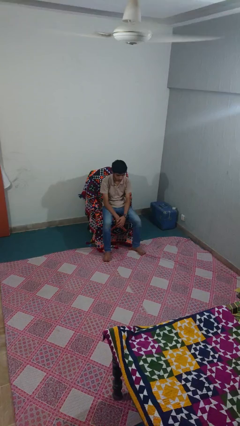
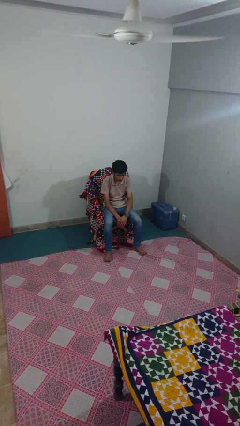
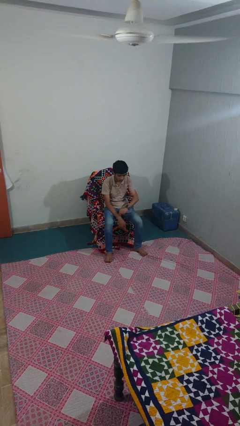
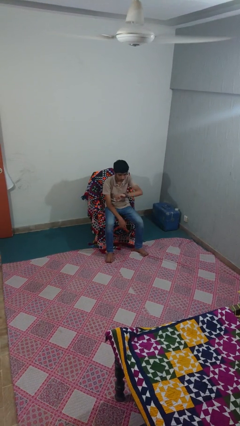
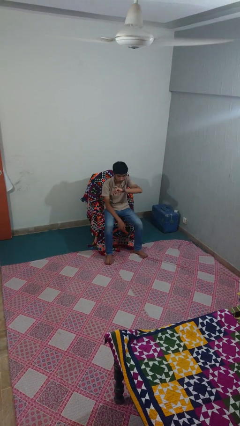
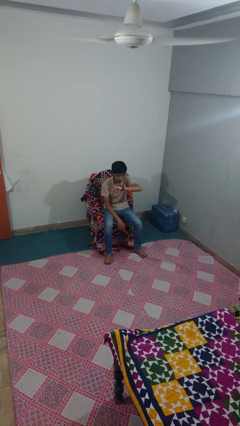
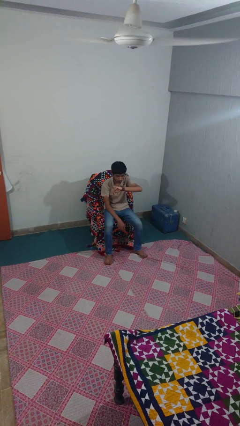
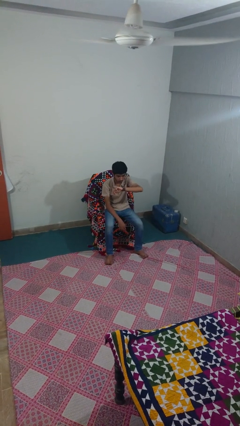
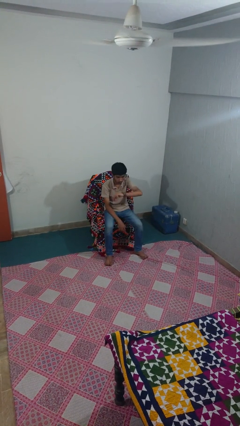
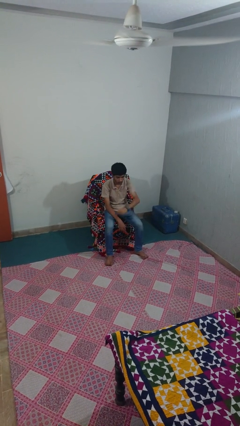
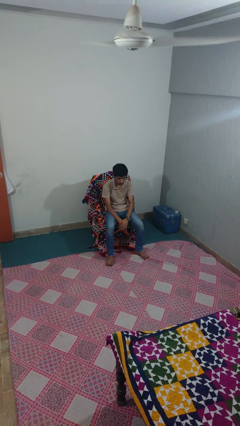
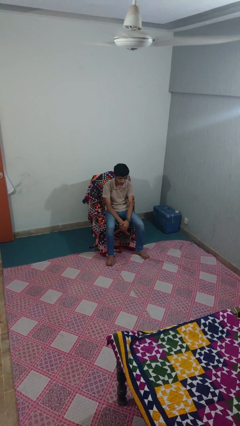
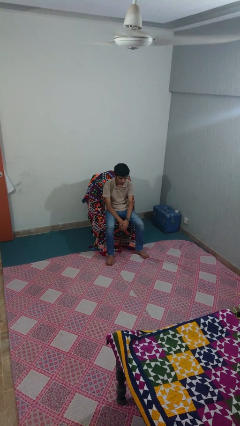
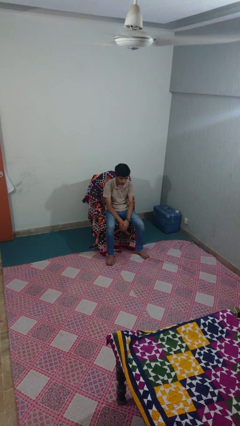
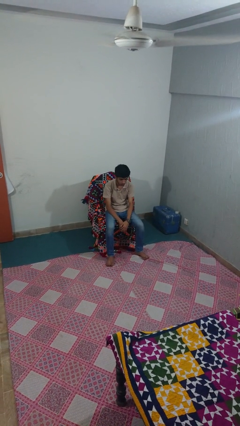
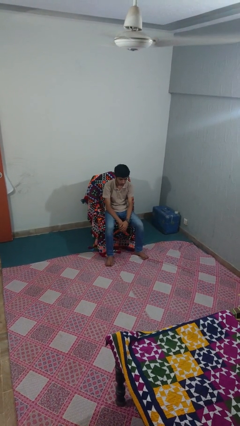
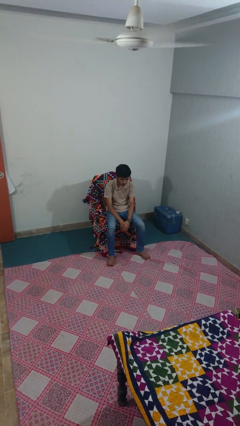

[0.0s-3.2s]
person looks at wristwatch

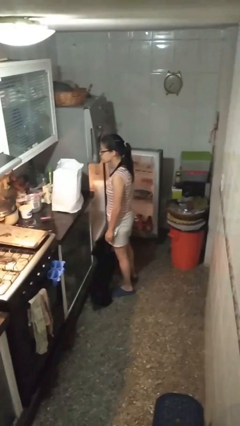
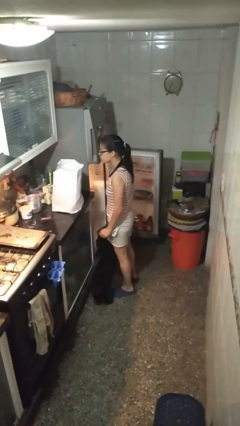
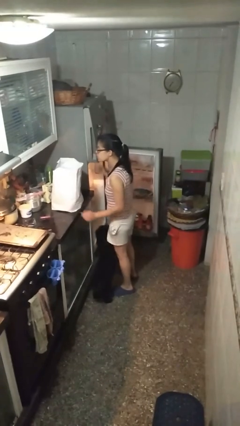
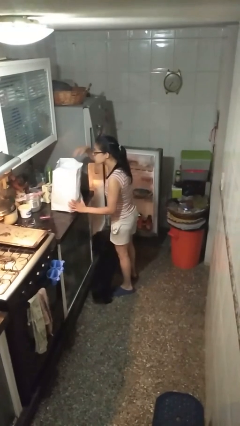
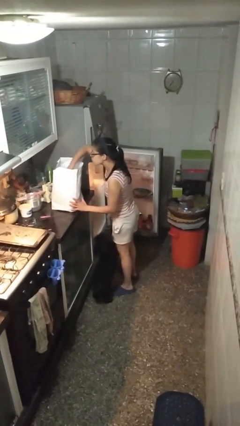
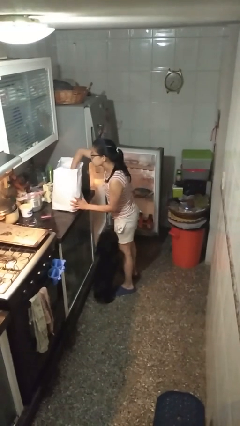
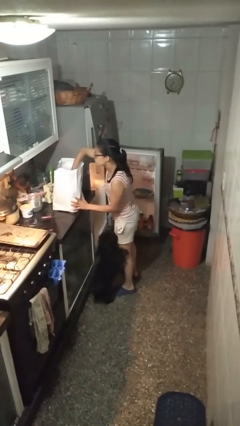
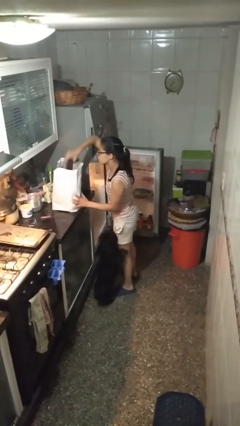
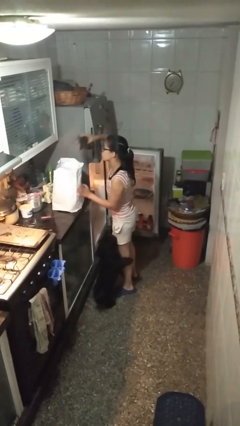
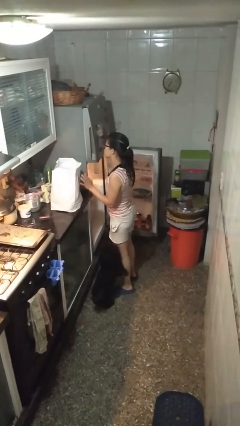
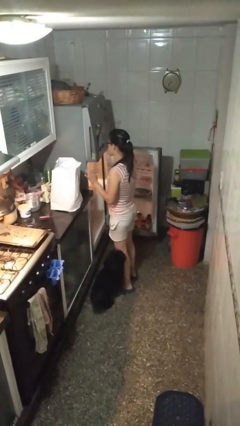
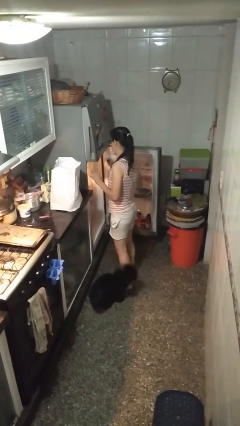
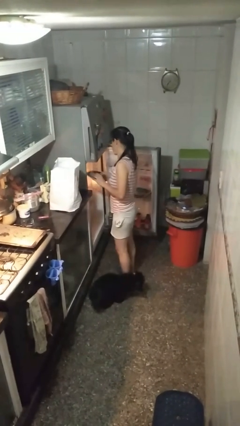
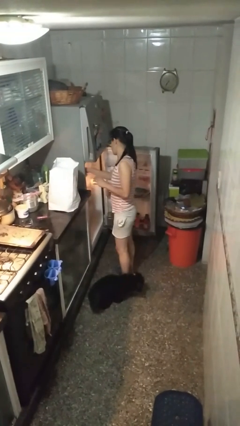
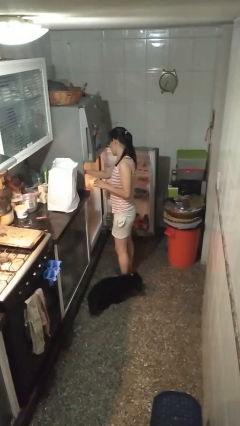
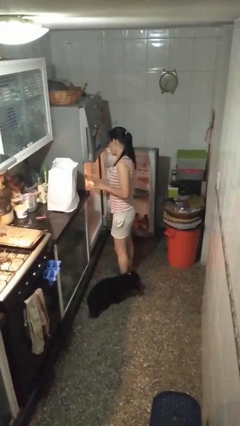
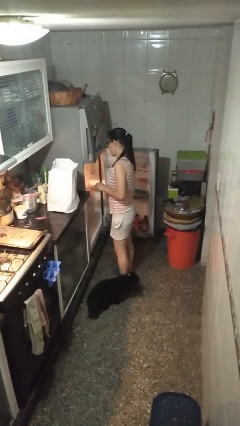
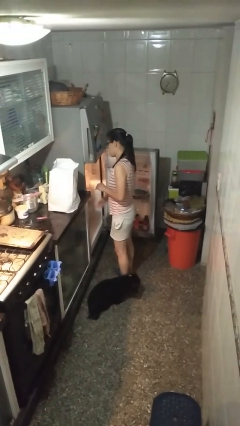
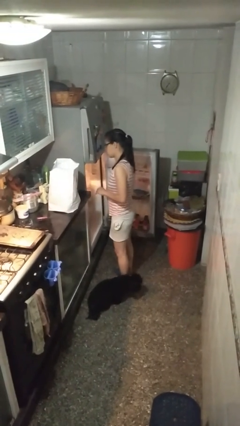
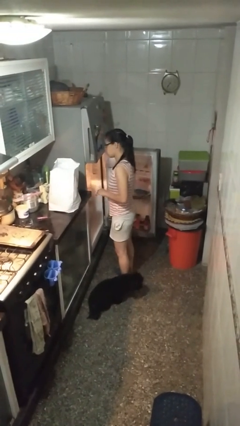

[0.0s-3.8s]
person loads groceries into refrigerator

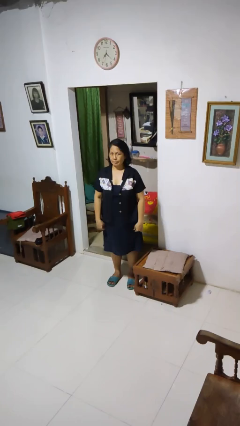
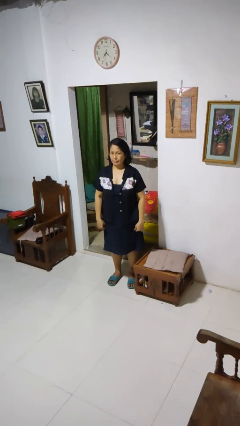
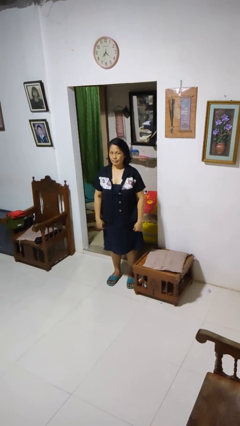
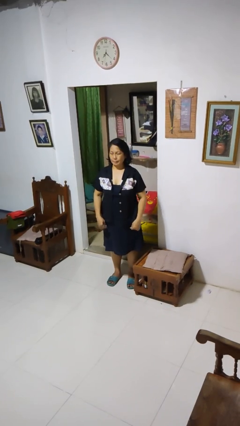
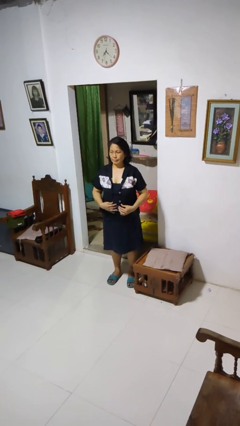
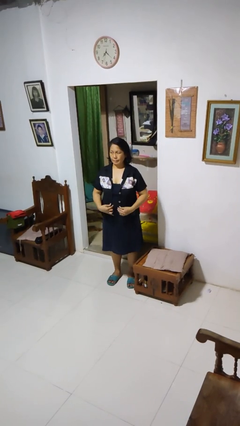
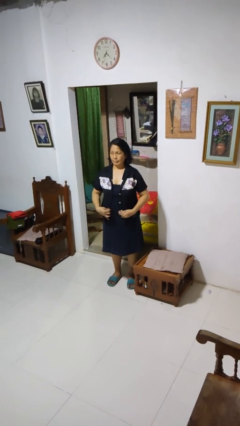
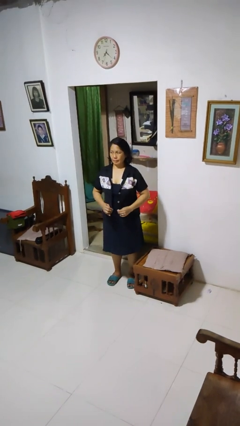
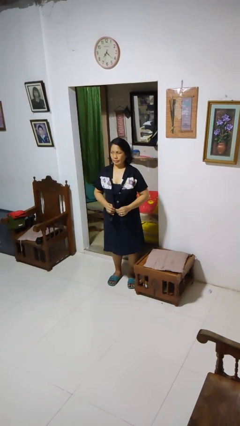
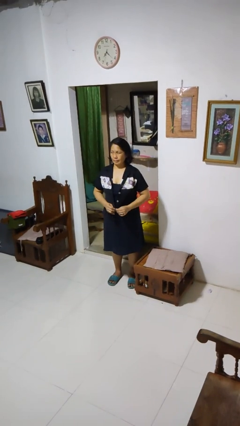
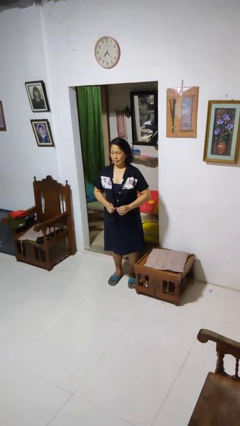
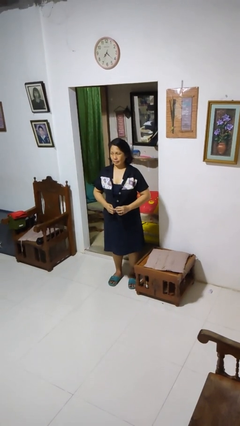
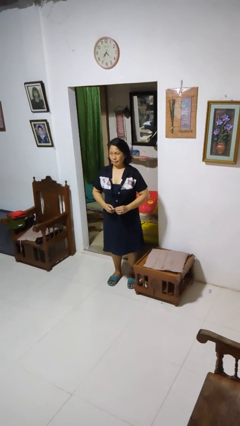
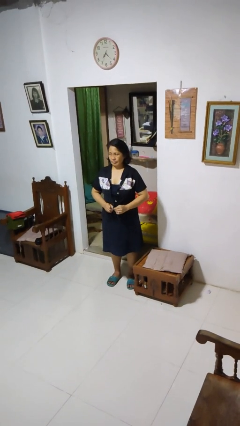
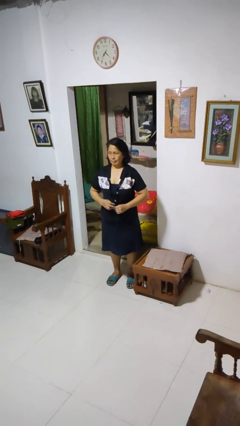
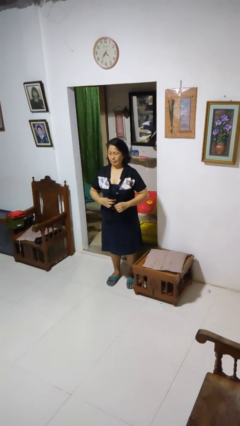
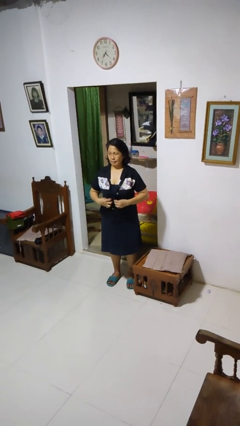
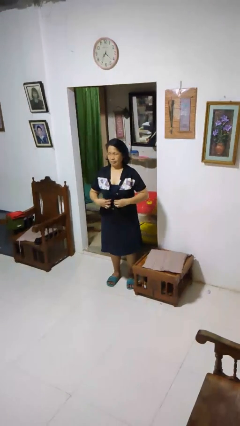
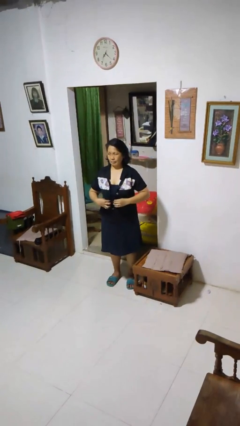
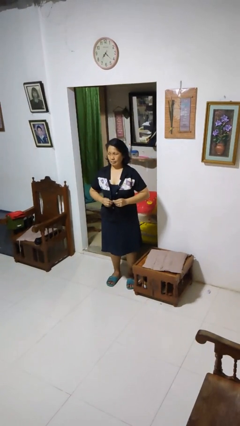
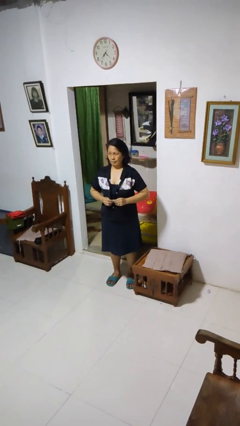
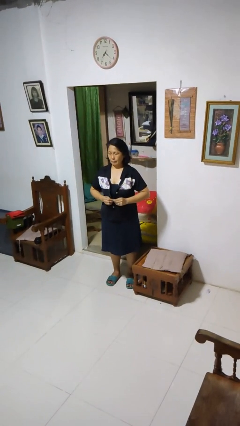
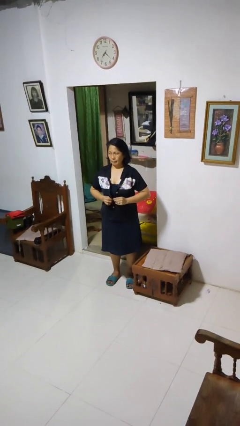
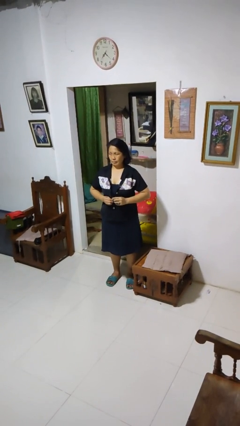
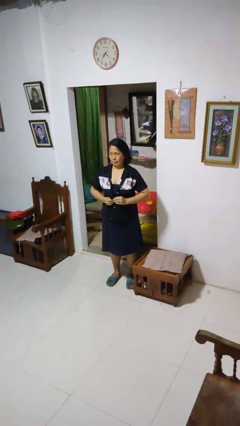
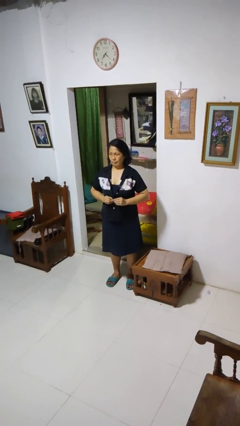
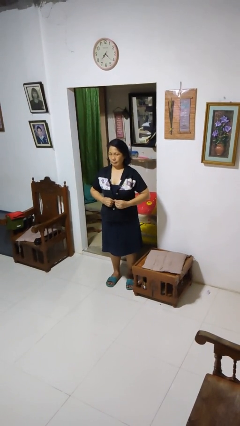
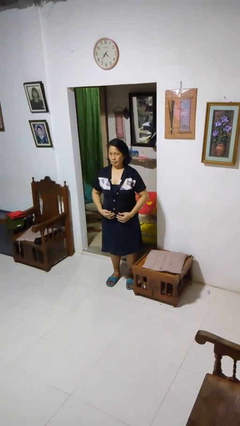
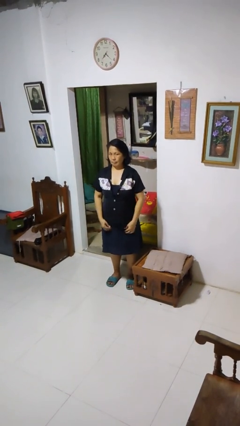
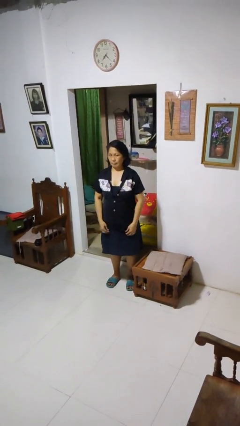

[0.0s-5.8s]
person buttons shirt

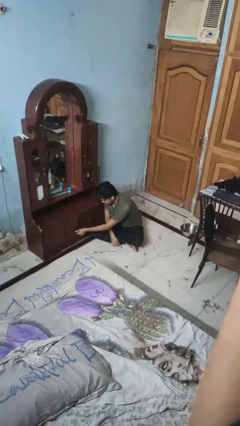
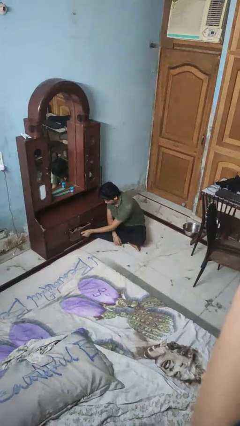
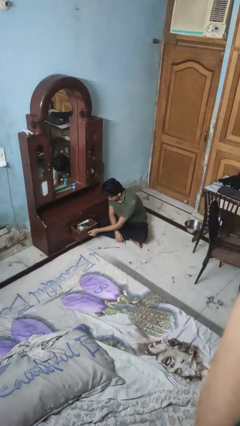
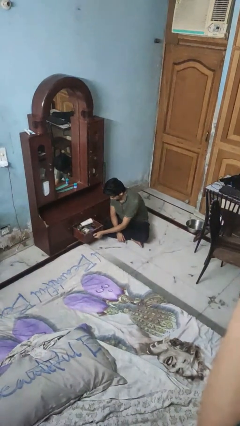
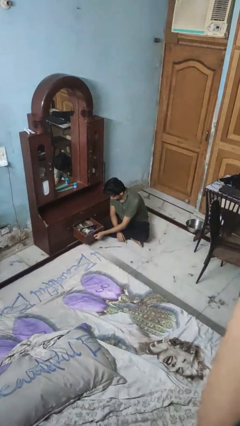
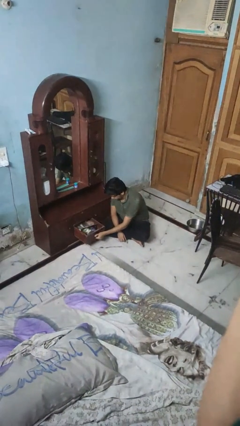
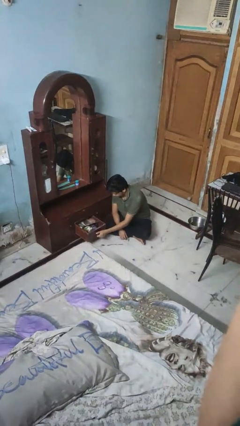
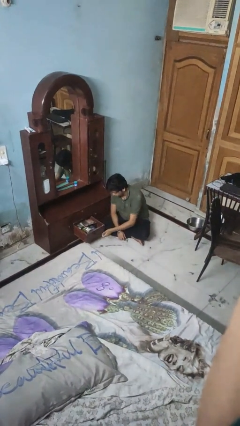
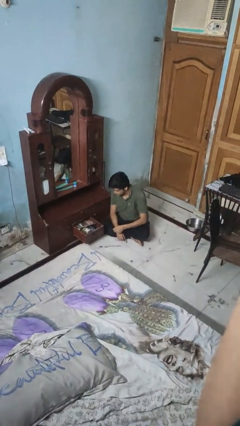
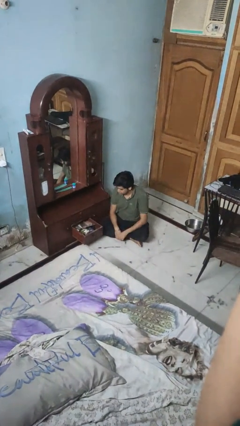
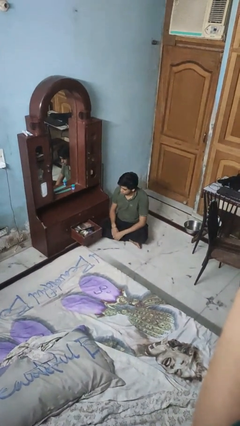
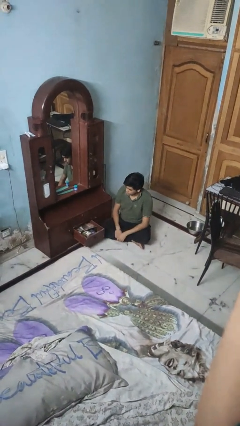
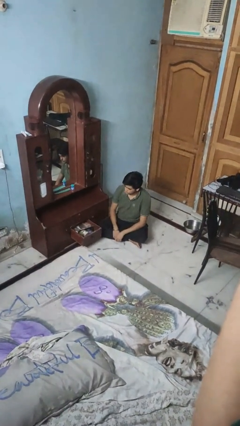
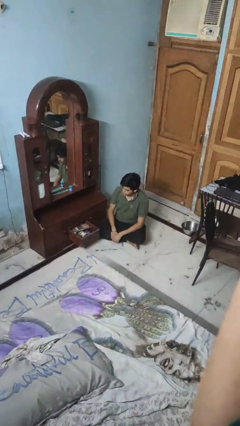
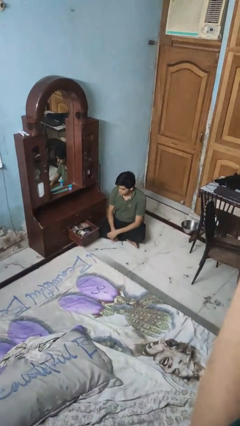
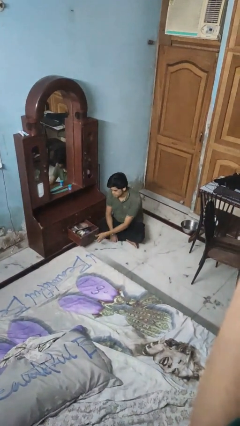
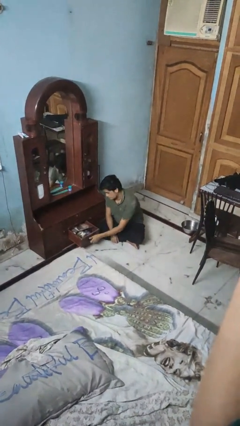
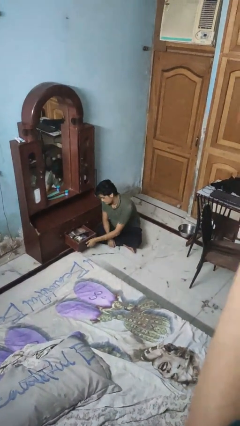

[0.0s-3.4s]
person opens dresser drawer

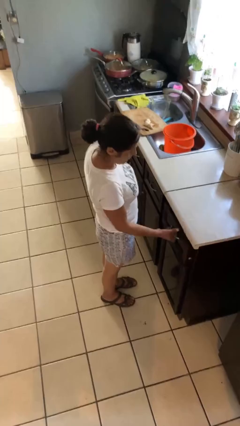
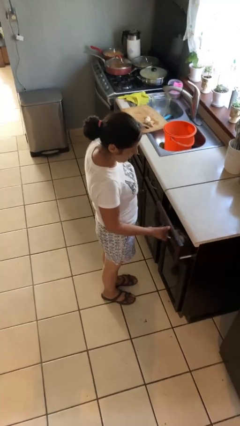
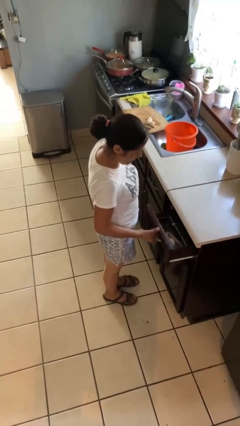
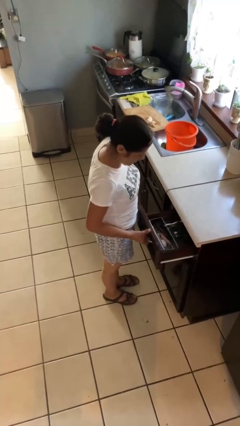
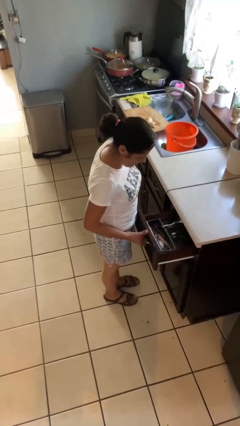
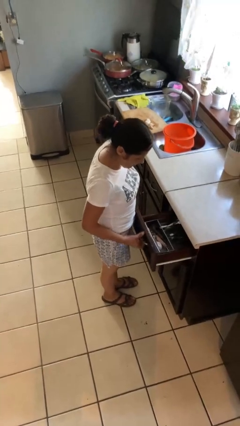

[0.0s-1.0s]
person opens kitchen drawer

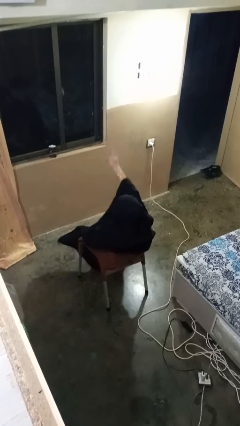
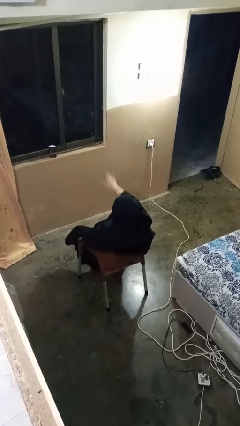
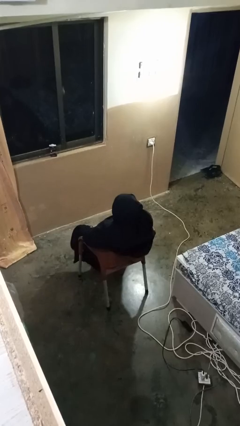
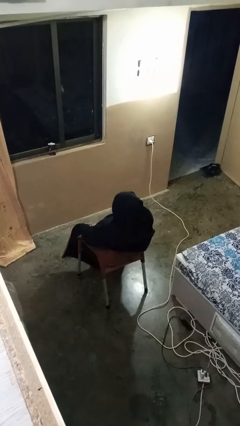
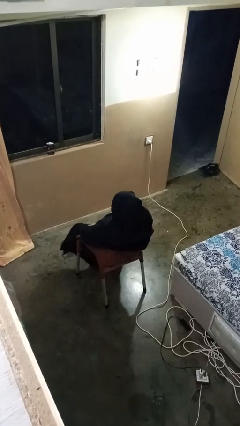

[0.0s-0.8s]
person gestures swipe down
